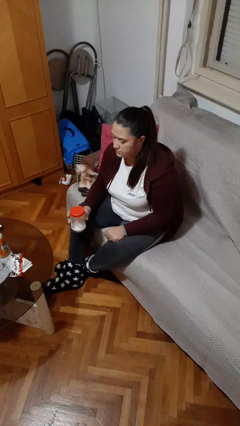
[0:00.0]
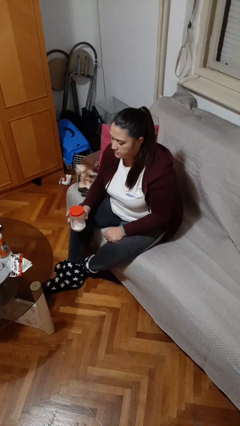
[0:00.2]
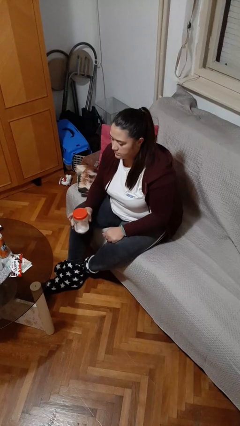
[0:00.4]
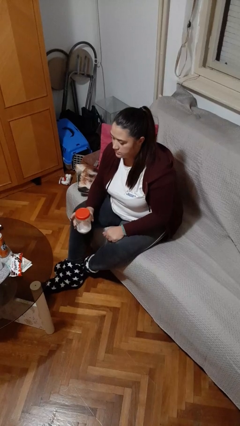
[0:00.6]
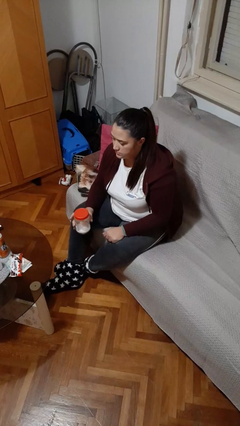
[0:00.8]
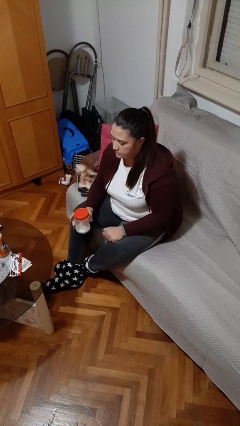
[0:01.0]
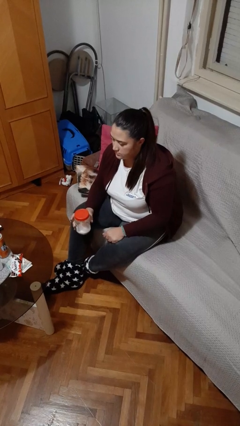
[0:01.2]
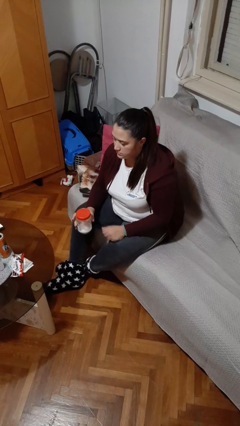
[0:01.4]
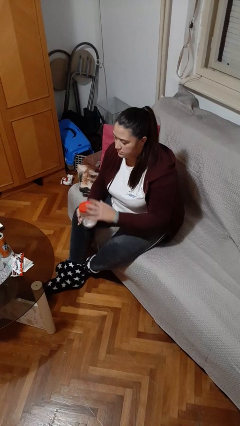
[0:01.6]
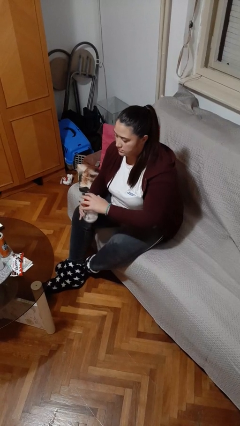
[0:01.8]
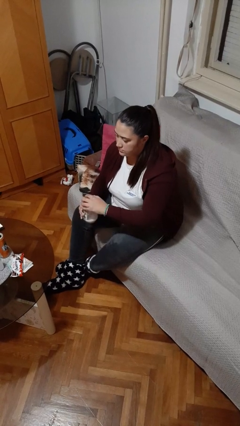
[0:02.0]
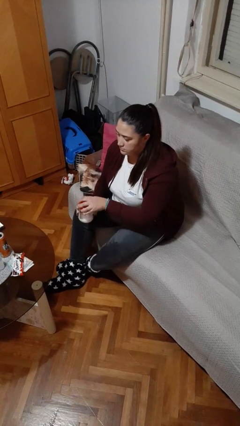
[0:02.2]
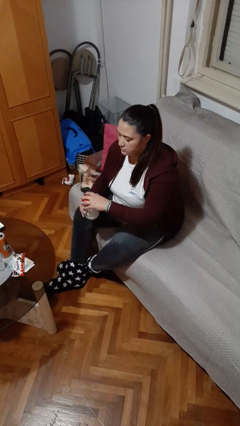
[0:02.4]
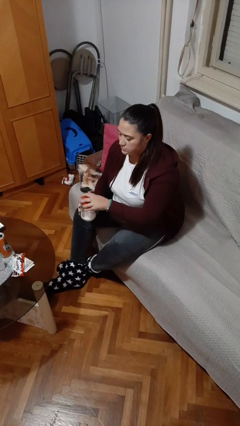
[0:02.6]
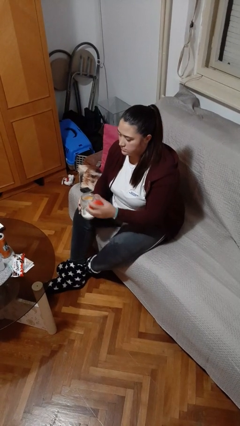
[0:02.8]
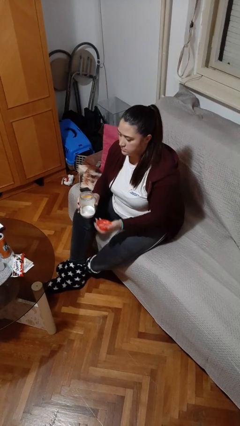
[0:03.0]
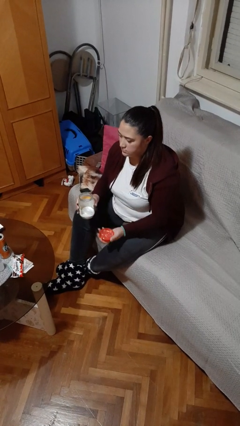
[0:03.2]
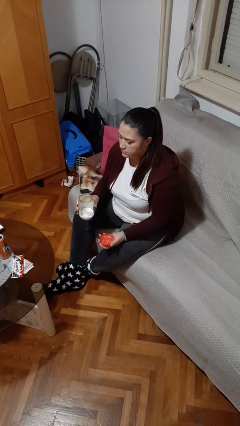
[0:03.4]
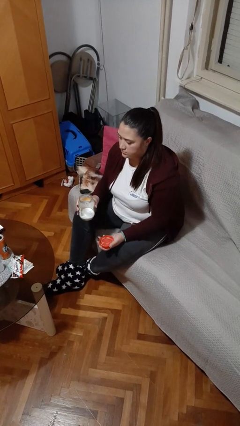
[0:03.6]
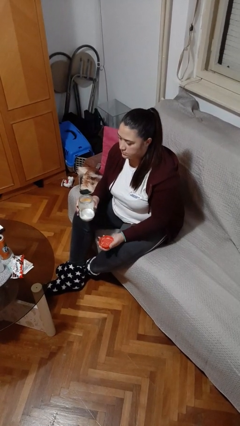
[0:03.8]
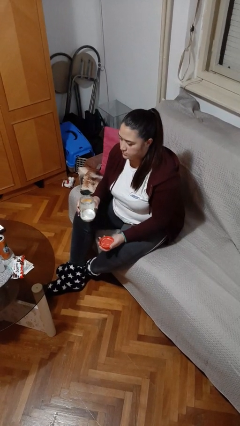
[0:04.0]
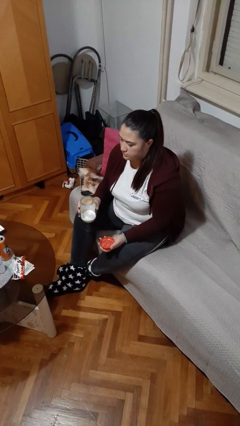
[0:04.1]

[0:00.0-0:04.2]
person opens jar

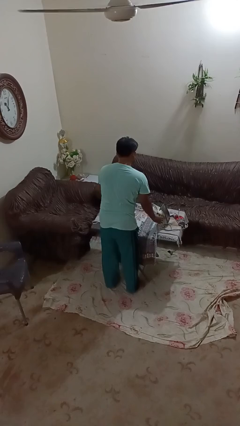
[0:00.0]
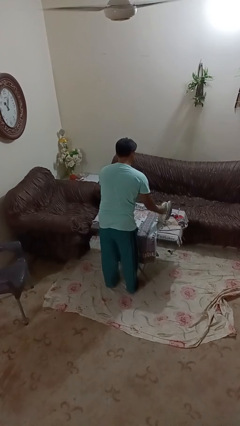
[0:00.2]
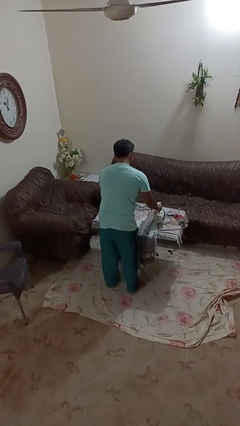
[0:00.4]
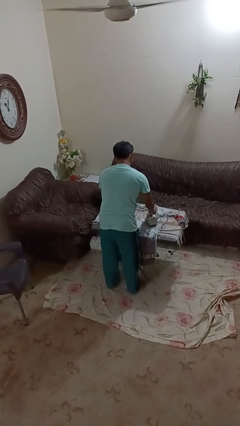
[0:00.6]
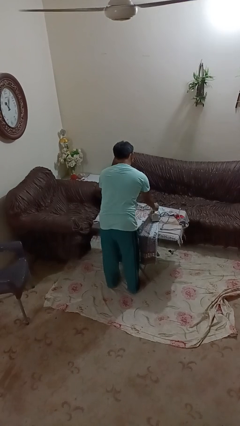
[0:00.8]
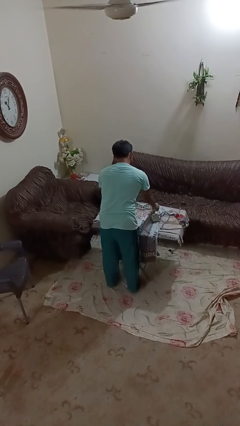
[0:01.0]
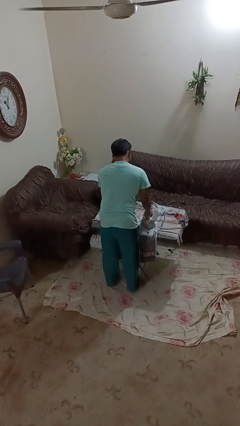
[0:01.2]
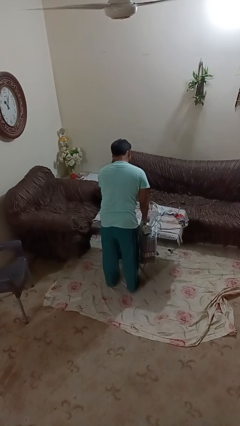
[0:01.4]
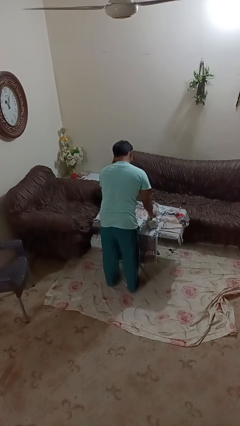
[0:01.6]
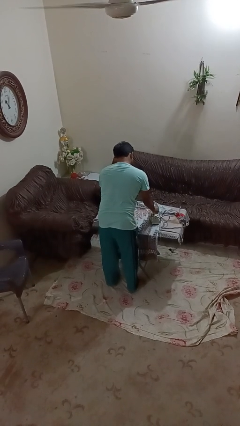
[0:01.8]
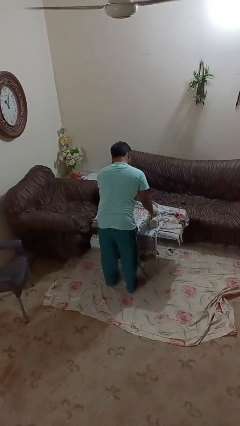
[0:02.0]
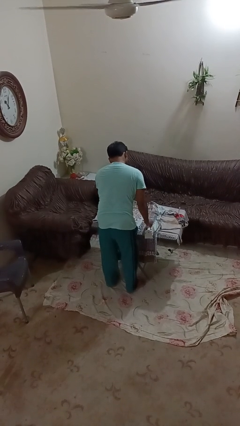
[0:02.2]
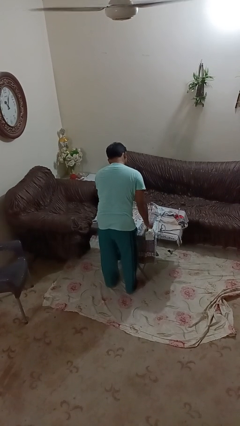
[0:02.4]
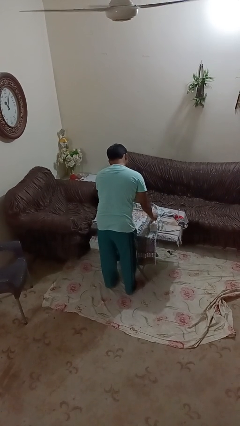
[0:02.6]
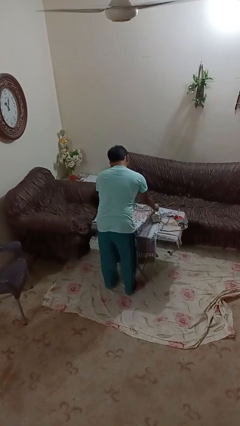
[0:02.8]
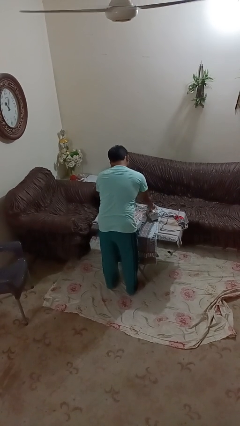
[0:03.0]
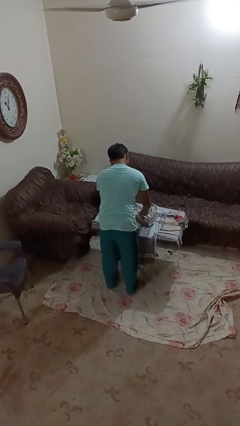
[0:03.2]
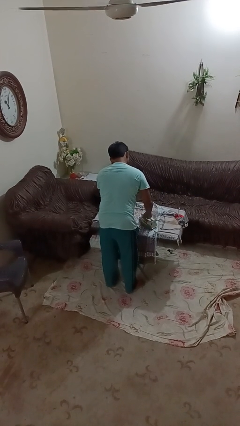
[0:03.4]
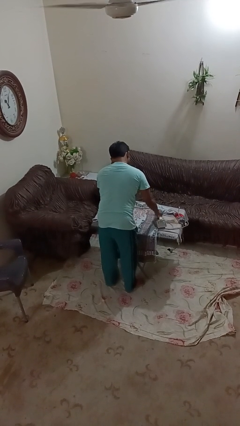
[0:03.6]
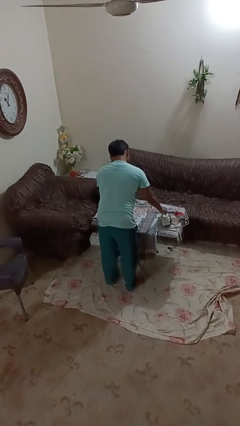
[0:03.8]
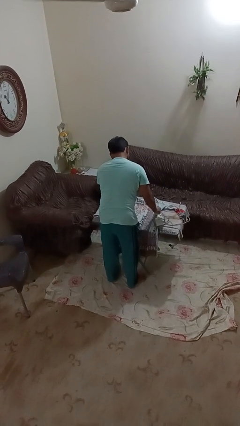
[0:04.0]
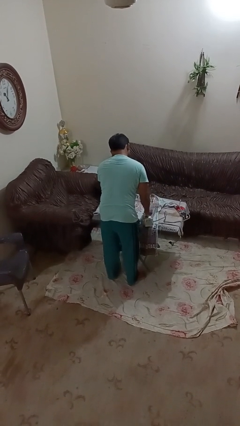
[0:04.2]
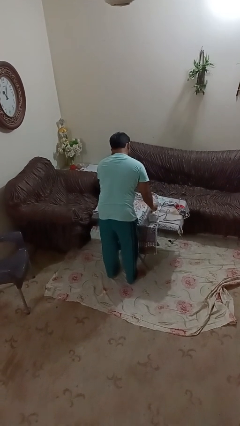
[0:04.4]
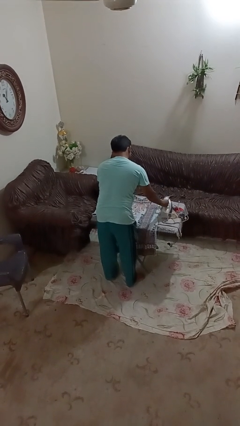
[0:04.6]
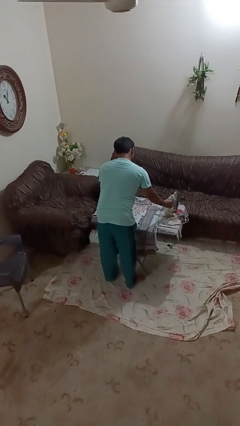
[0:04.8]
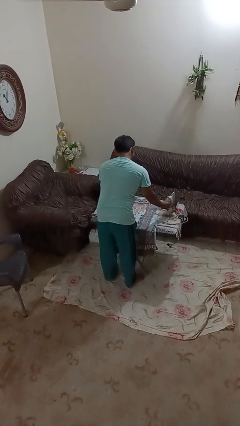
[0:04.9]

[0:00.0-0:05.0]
person irons clothes

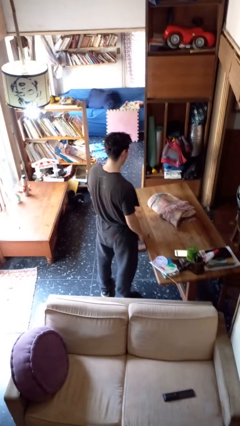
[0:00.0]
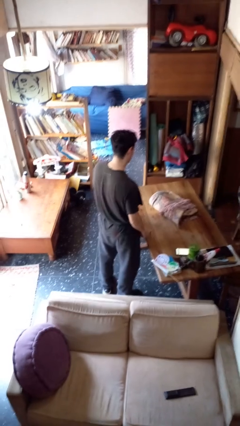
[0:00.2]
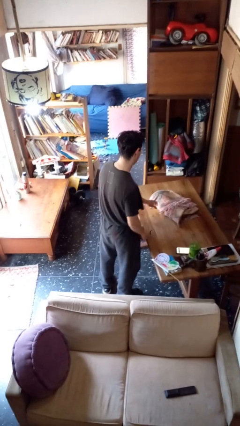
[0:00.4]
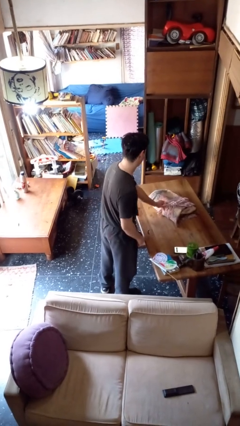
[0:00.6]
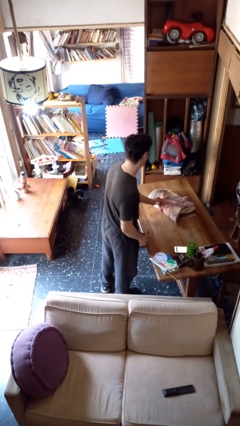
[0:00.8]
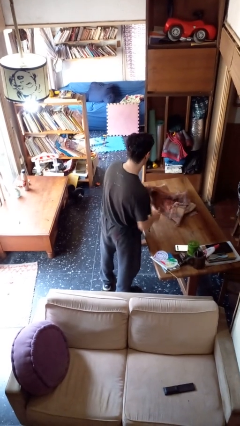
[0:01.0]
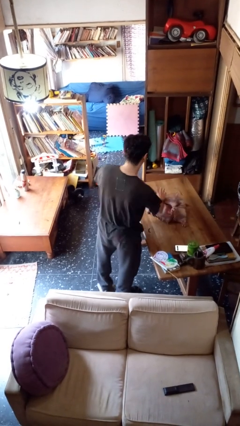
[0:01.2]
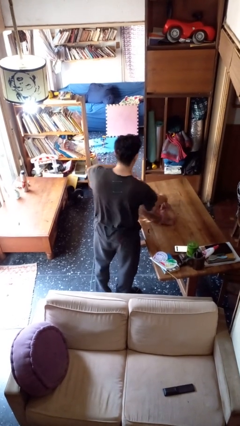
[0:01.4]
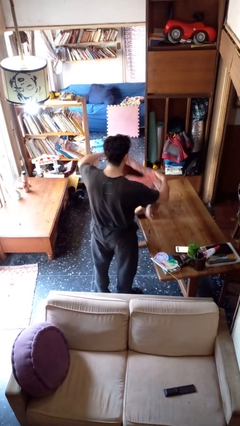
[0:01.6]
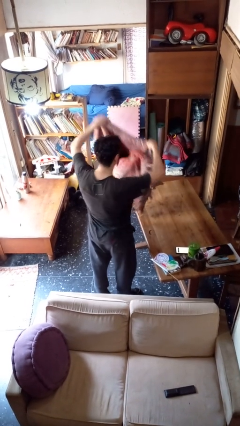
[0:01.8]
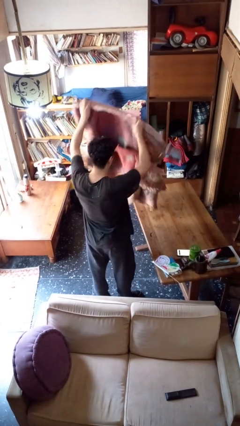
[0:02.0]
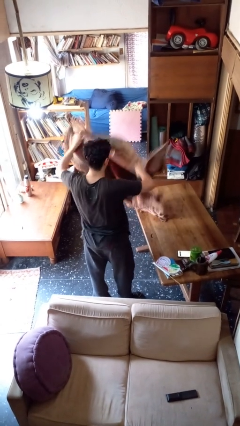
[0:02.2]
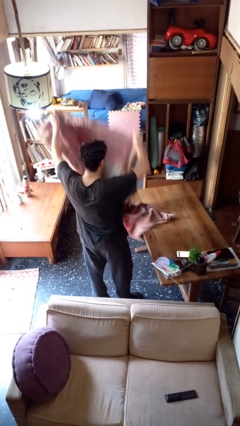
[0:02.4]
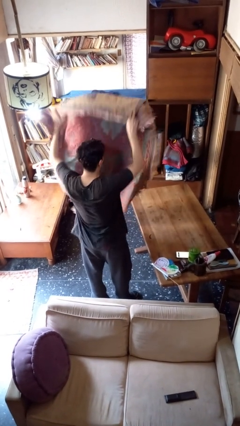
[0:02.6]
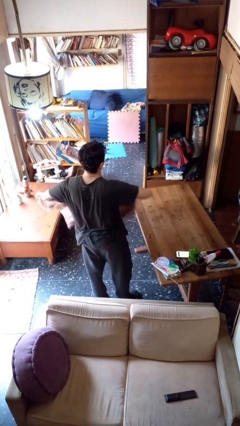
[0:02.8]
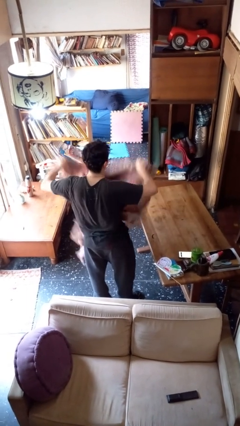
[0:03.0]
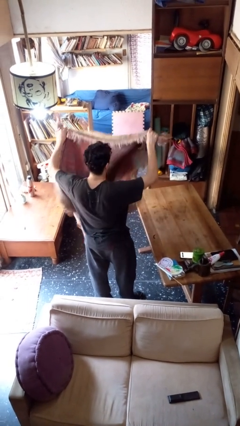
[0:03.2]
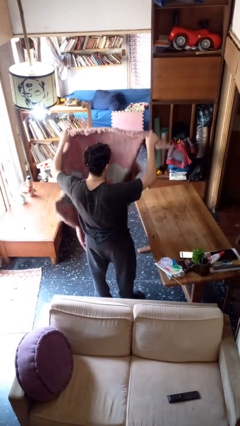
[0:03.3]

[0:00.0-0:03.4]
person unfolds blanket

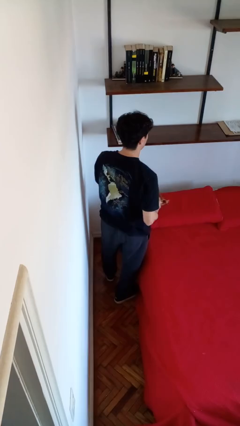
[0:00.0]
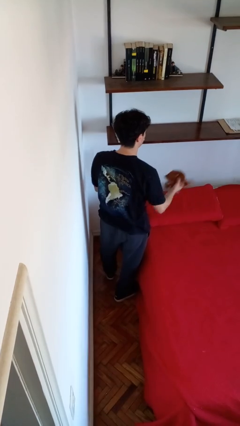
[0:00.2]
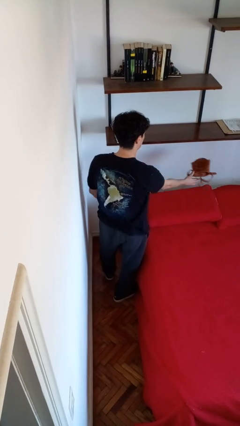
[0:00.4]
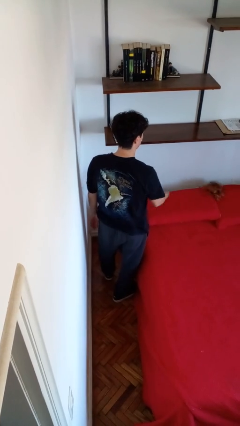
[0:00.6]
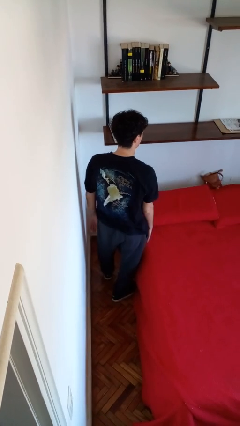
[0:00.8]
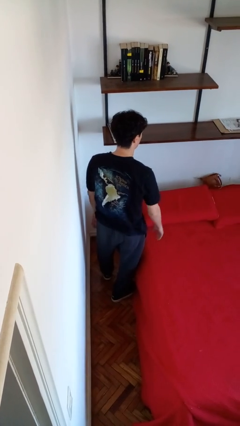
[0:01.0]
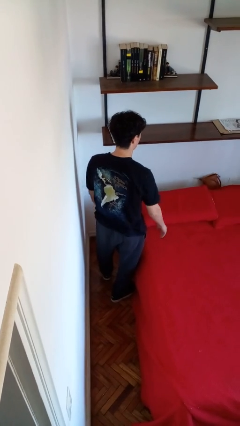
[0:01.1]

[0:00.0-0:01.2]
person throws object on bed

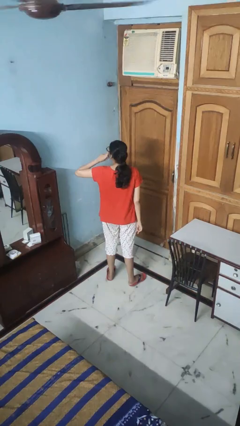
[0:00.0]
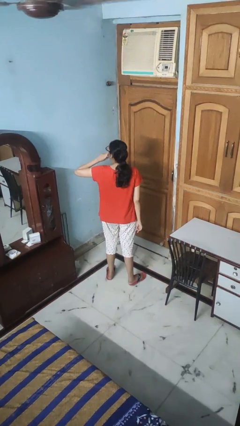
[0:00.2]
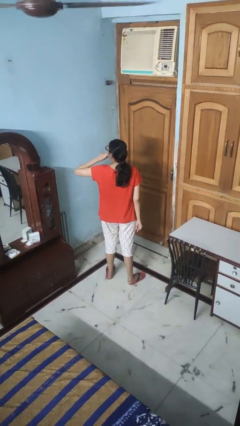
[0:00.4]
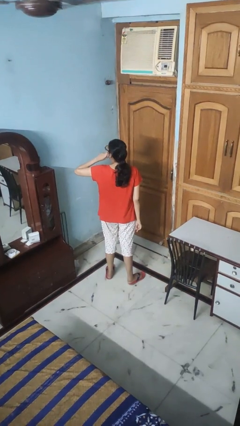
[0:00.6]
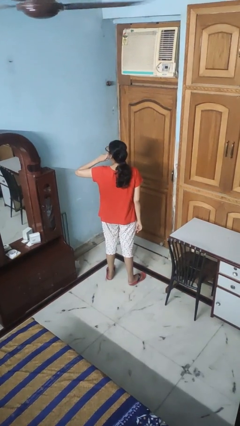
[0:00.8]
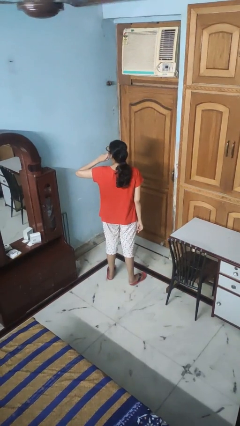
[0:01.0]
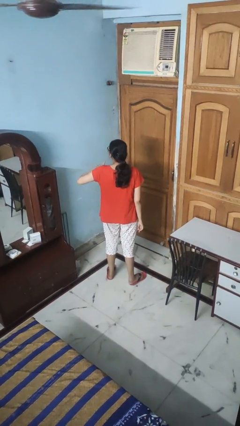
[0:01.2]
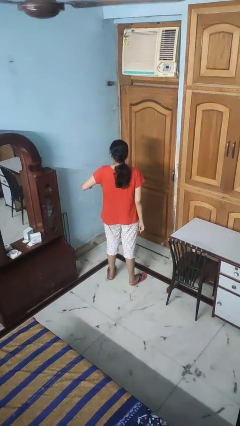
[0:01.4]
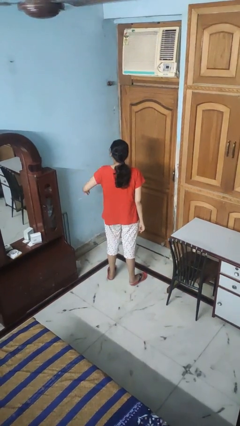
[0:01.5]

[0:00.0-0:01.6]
person gestures be quiet

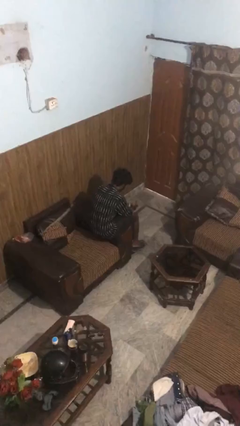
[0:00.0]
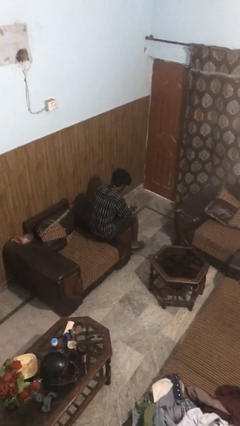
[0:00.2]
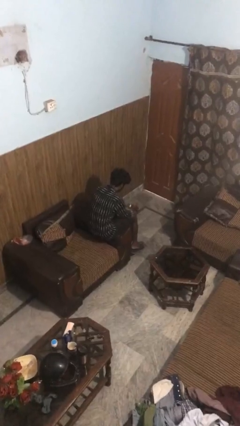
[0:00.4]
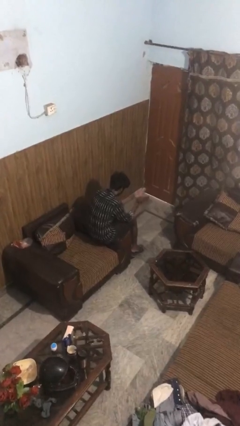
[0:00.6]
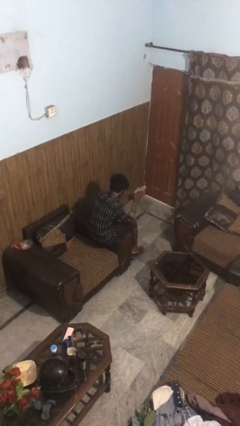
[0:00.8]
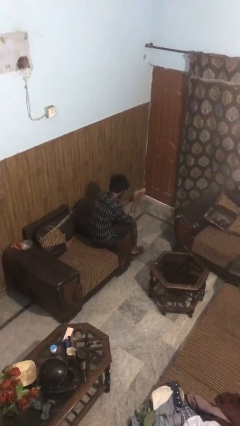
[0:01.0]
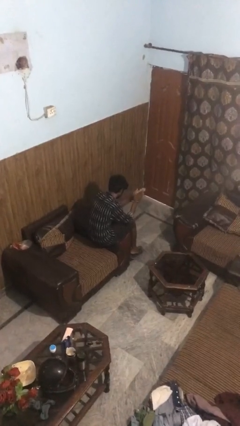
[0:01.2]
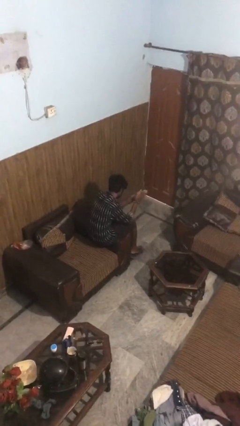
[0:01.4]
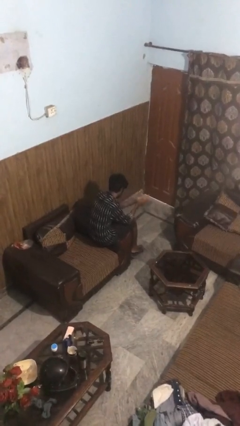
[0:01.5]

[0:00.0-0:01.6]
person claps hands

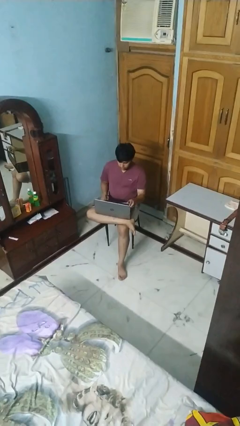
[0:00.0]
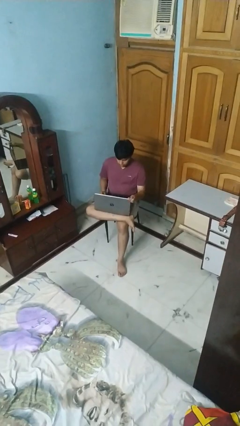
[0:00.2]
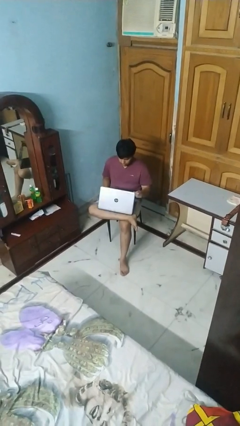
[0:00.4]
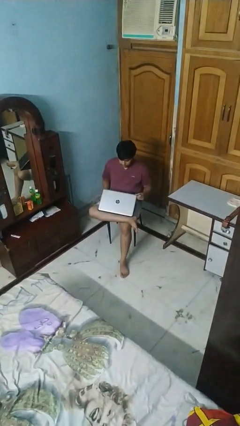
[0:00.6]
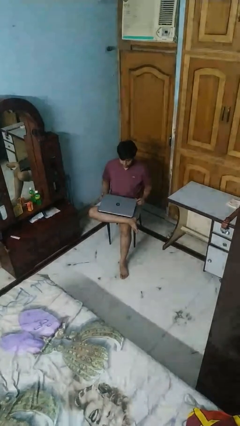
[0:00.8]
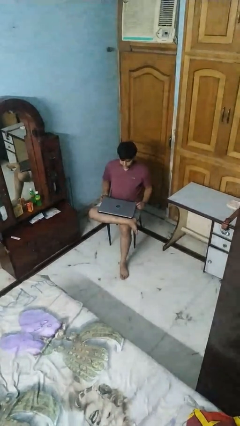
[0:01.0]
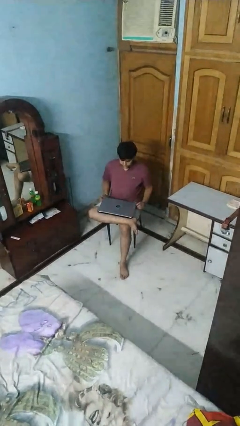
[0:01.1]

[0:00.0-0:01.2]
person closes laptop
